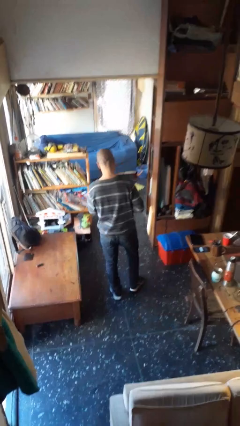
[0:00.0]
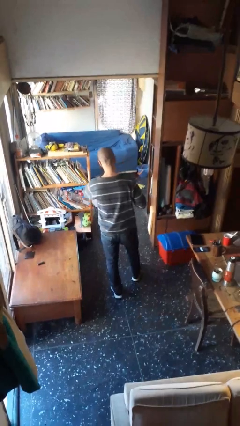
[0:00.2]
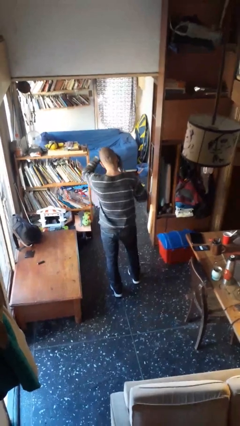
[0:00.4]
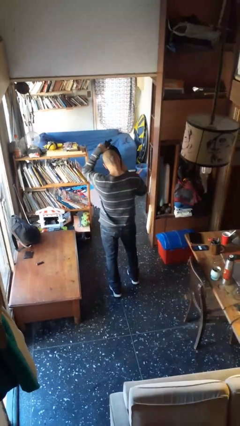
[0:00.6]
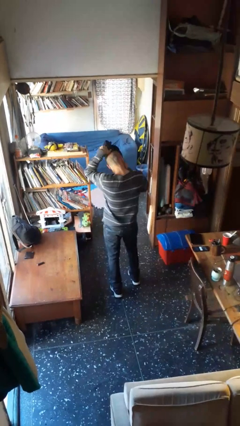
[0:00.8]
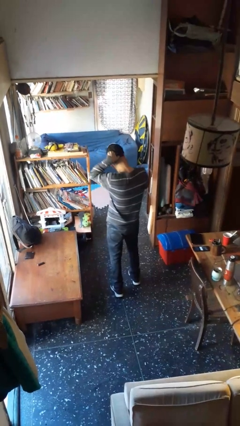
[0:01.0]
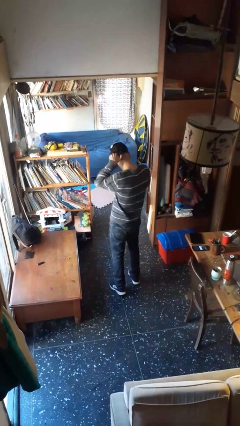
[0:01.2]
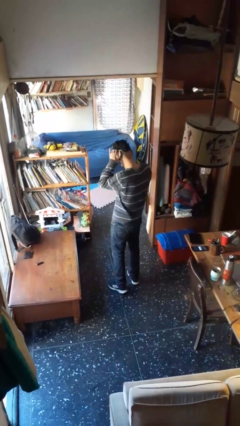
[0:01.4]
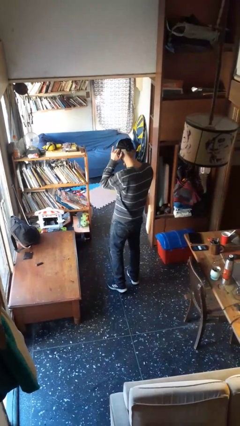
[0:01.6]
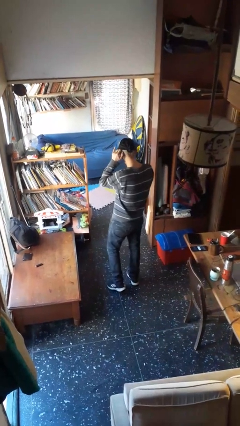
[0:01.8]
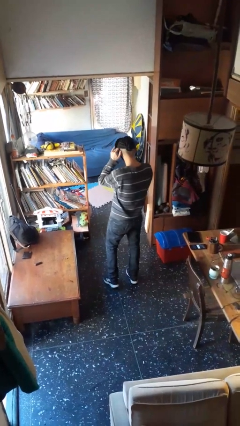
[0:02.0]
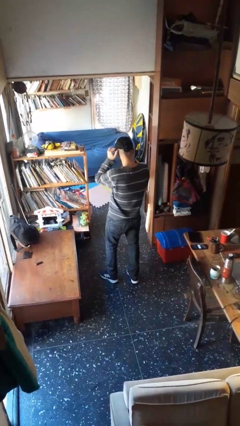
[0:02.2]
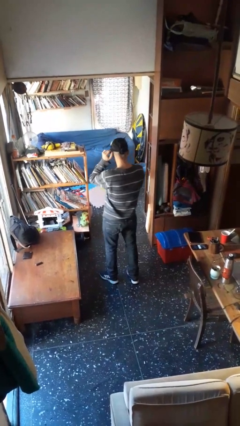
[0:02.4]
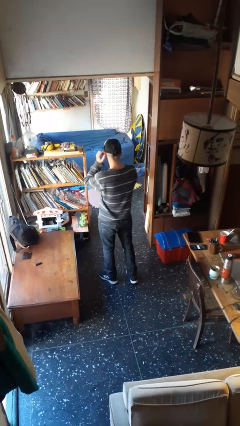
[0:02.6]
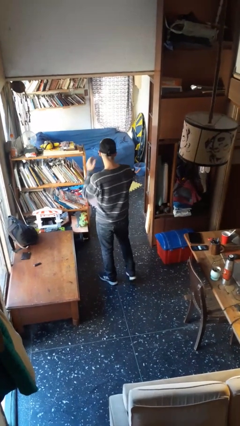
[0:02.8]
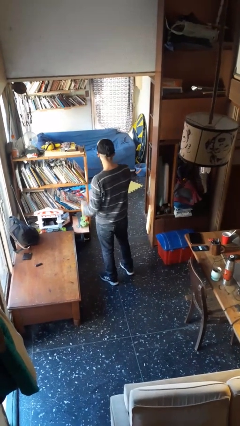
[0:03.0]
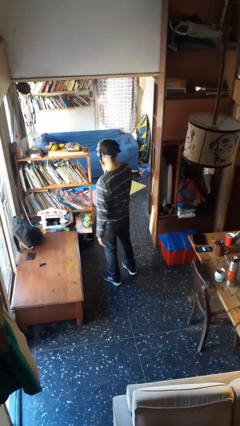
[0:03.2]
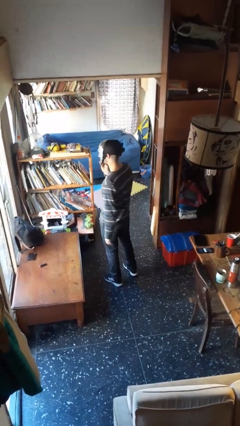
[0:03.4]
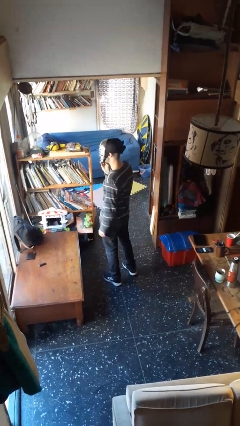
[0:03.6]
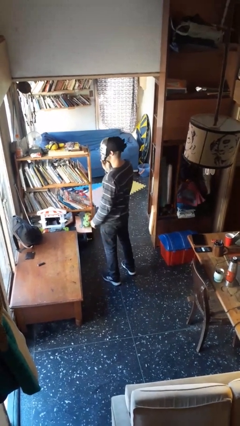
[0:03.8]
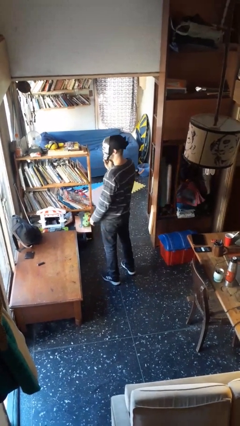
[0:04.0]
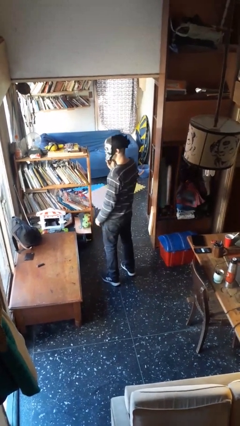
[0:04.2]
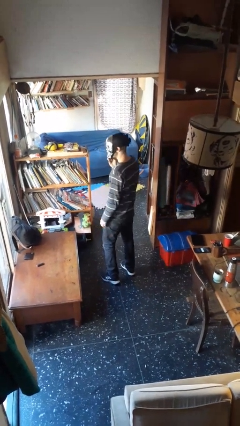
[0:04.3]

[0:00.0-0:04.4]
person puts on facemask

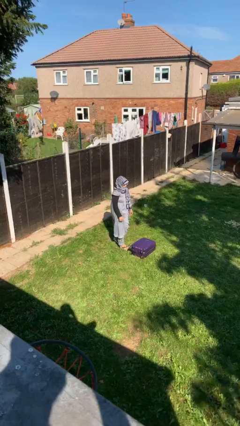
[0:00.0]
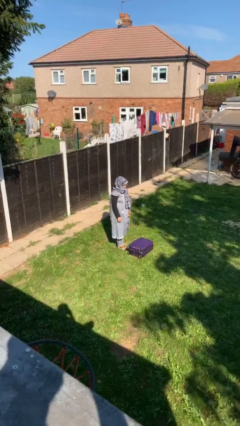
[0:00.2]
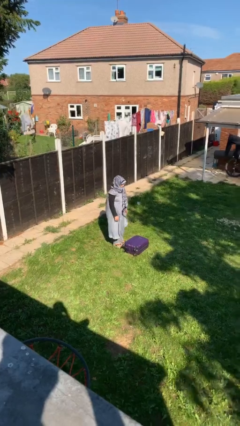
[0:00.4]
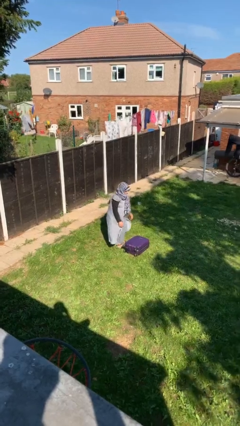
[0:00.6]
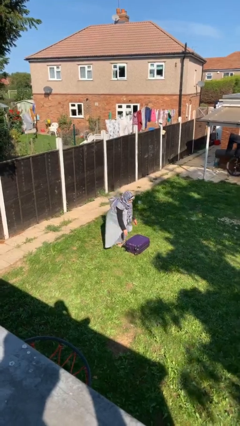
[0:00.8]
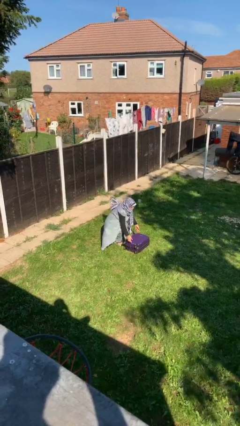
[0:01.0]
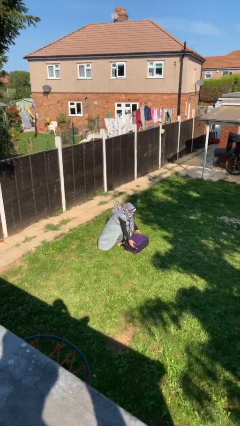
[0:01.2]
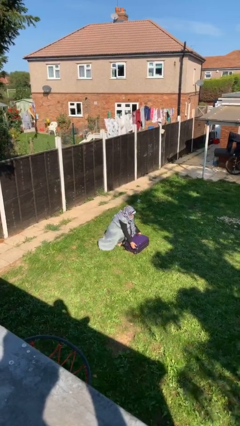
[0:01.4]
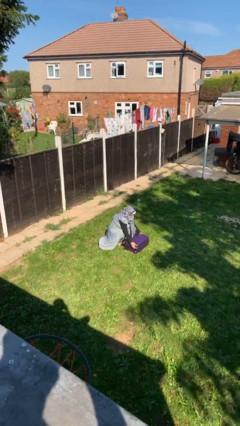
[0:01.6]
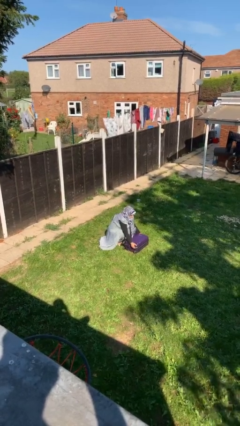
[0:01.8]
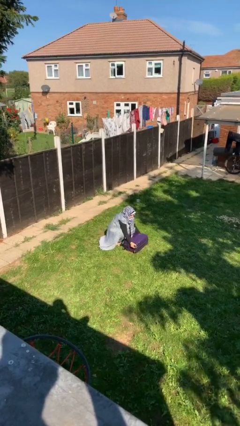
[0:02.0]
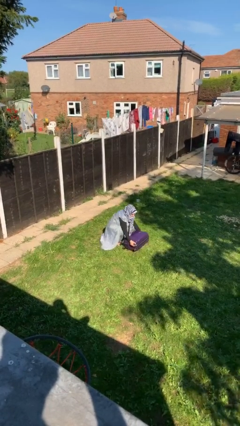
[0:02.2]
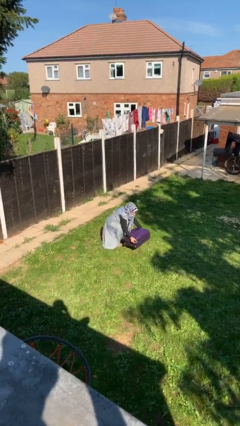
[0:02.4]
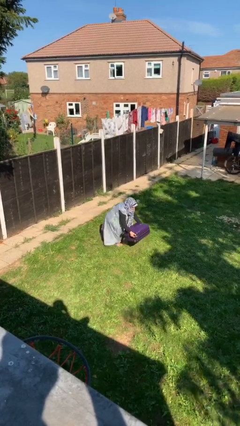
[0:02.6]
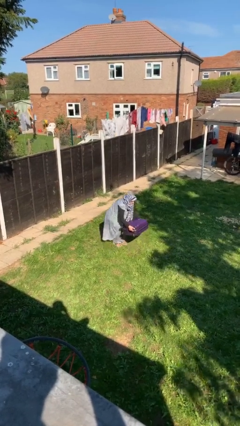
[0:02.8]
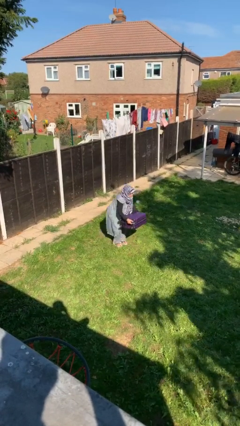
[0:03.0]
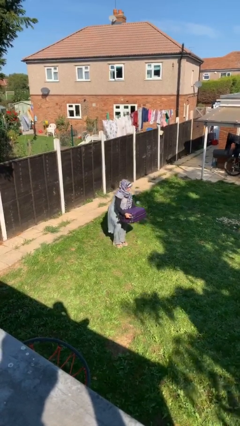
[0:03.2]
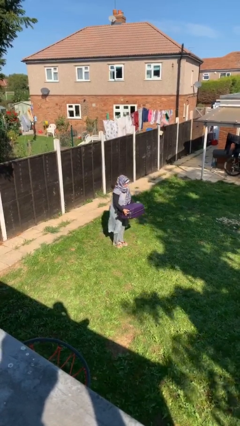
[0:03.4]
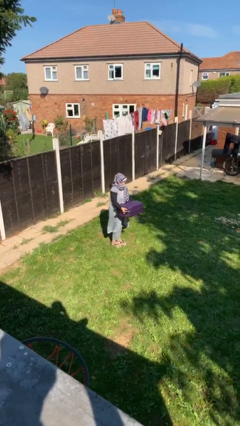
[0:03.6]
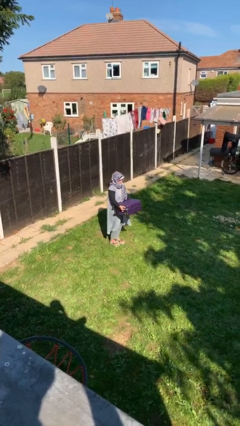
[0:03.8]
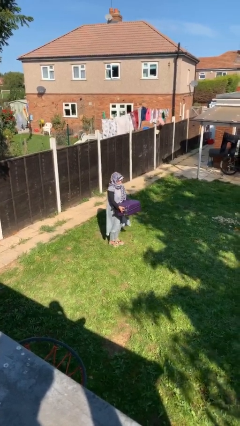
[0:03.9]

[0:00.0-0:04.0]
person picks up object from floor

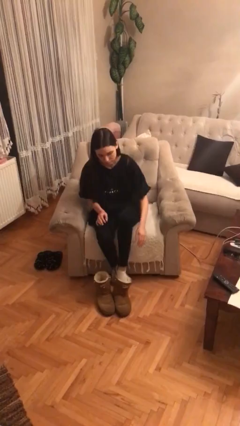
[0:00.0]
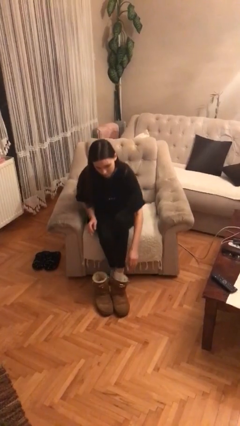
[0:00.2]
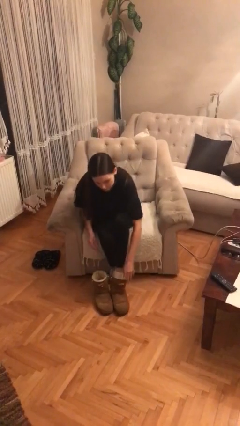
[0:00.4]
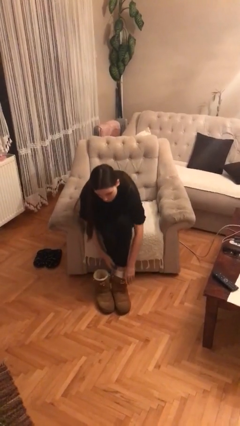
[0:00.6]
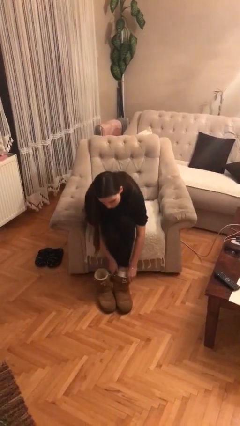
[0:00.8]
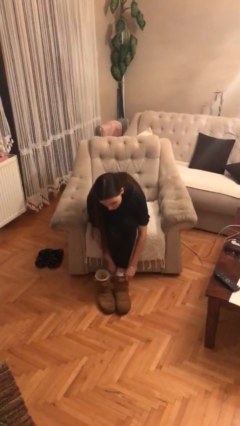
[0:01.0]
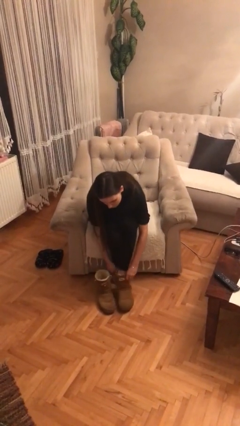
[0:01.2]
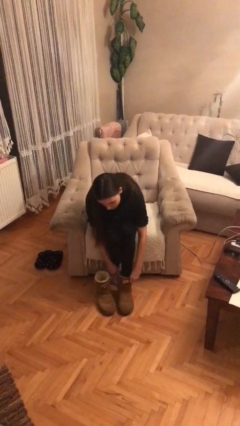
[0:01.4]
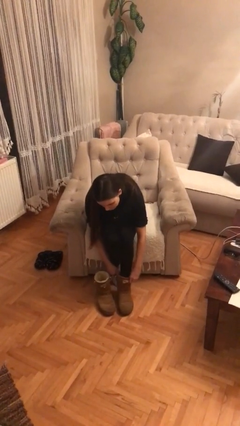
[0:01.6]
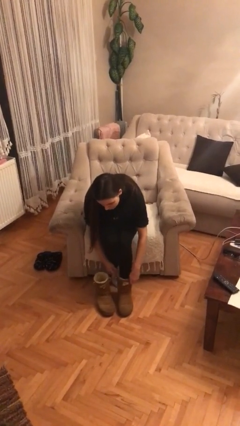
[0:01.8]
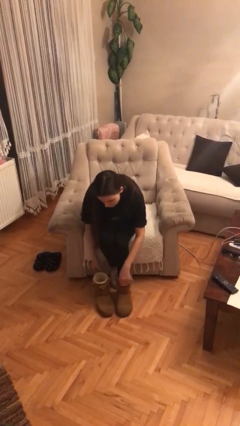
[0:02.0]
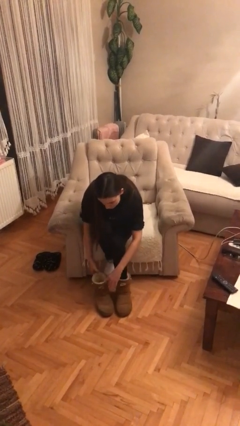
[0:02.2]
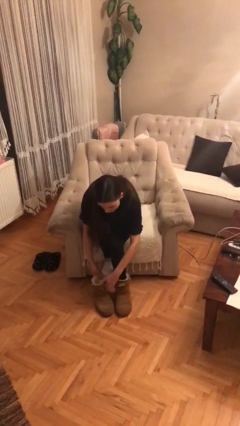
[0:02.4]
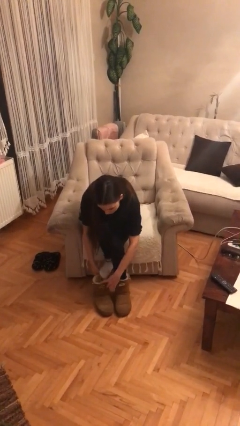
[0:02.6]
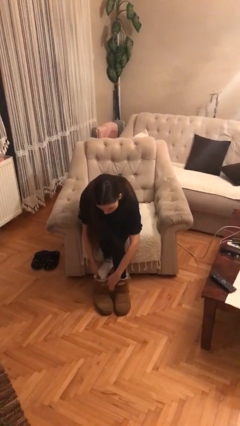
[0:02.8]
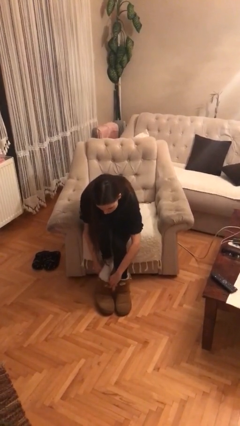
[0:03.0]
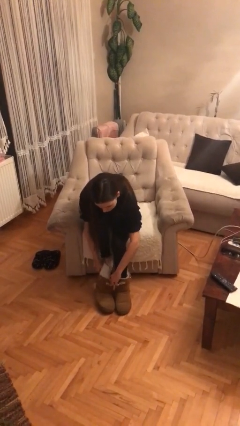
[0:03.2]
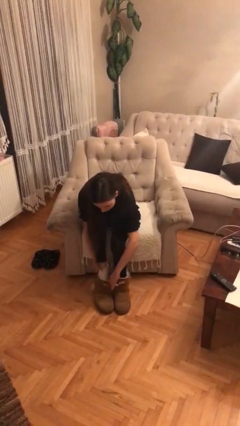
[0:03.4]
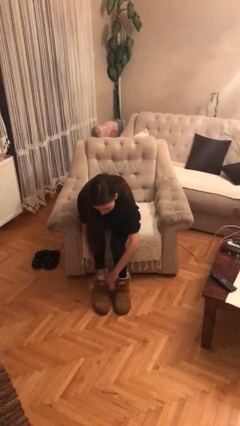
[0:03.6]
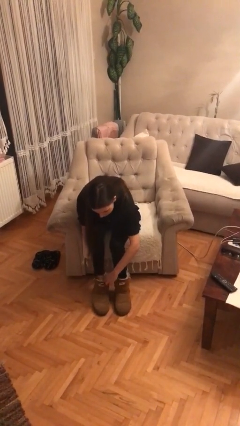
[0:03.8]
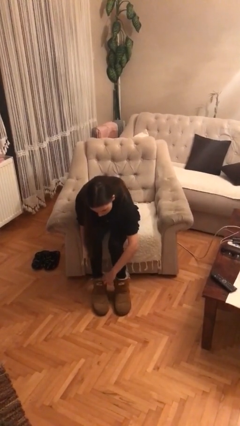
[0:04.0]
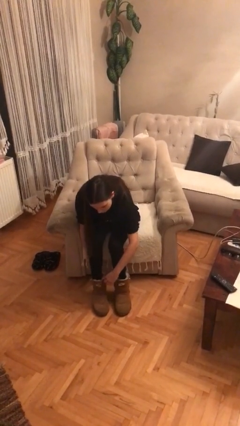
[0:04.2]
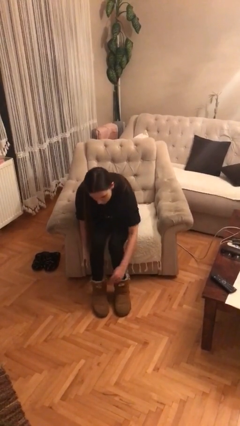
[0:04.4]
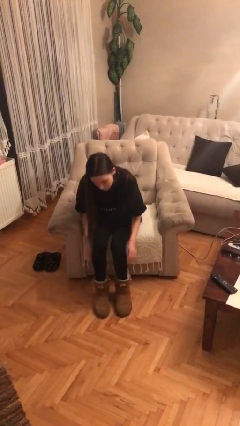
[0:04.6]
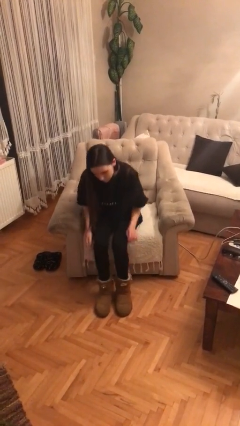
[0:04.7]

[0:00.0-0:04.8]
person puts on shoes

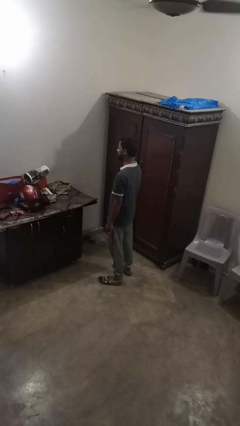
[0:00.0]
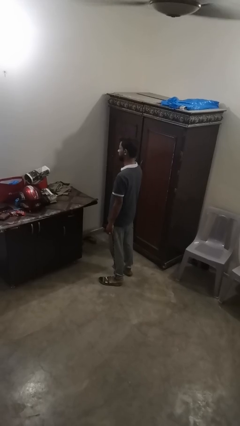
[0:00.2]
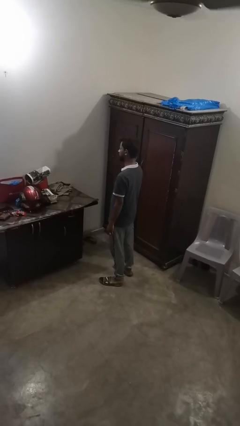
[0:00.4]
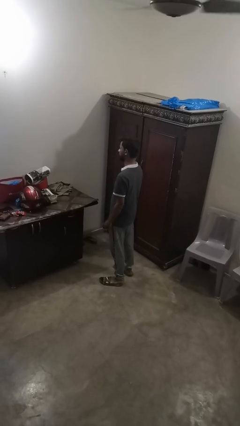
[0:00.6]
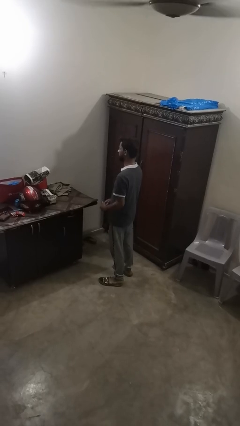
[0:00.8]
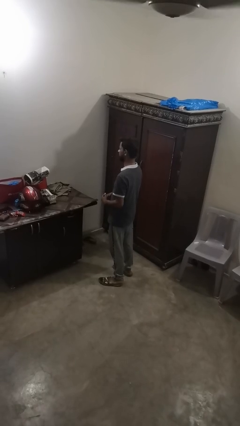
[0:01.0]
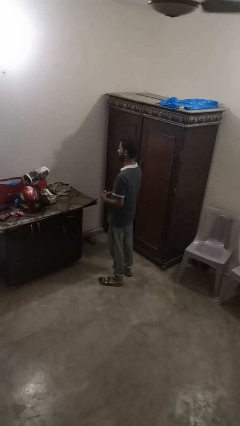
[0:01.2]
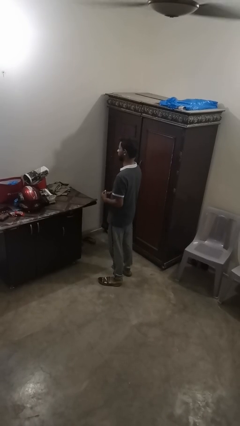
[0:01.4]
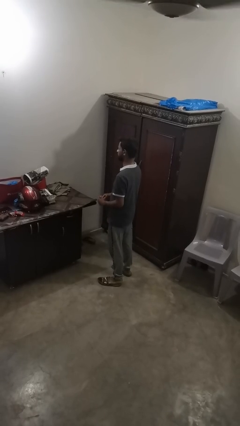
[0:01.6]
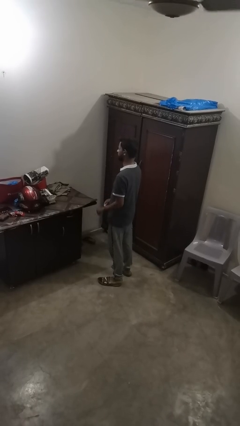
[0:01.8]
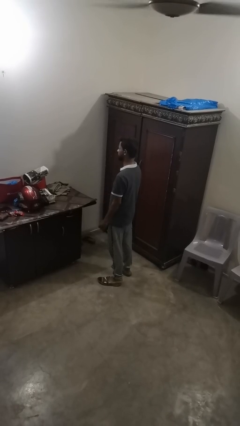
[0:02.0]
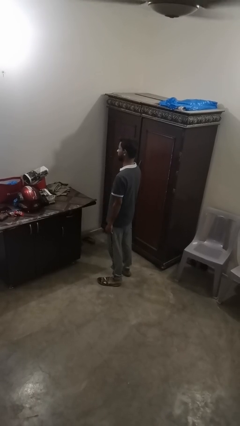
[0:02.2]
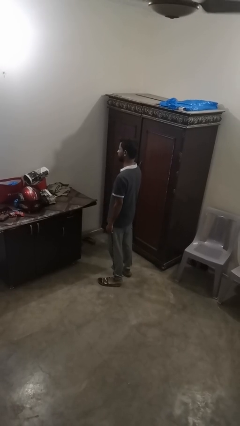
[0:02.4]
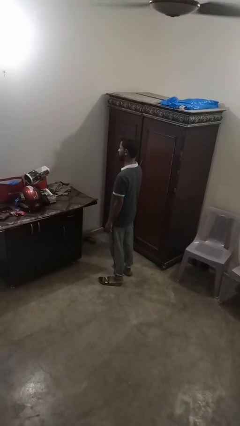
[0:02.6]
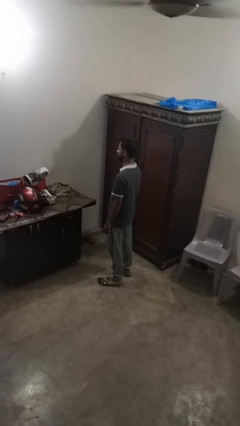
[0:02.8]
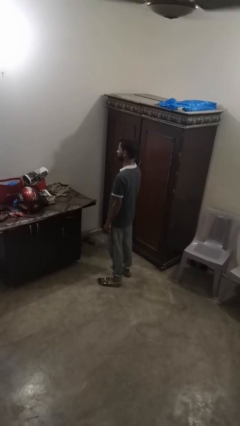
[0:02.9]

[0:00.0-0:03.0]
person takes off ring

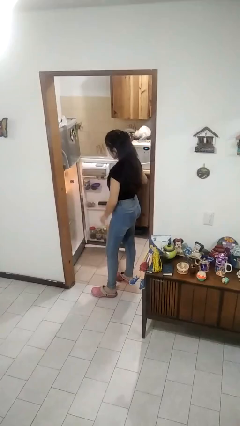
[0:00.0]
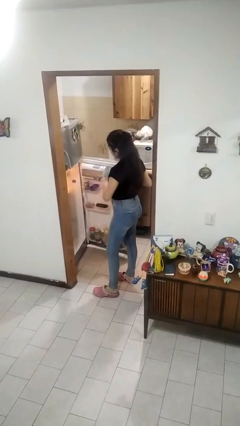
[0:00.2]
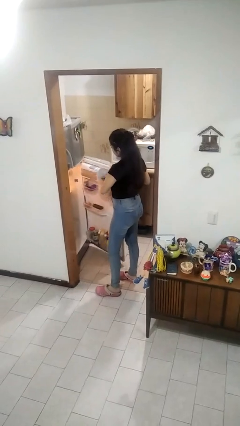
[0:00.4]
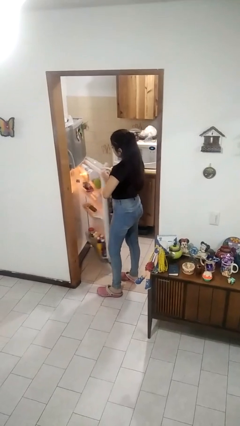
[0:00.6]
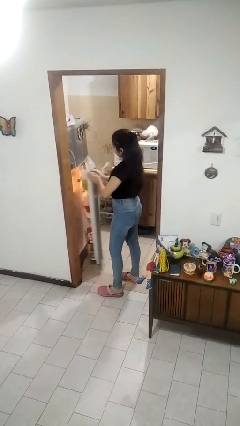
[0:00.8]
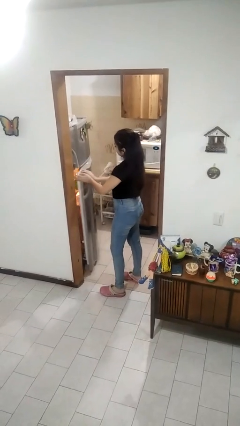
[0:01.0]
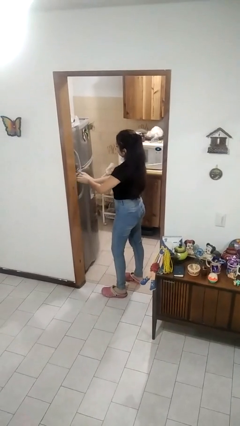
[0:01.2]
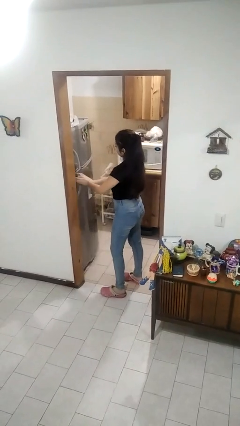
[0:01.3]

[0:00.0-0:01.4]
person closes refrigerator
